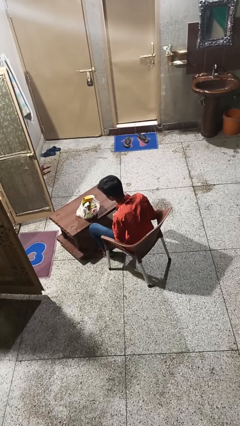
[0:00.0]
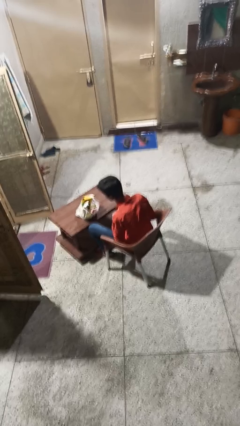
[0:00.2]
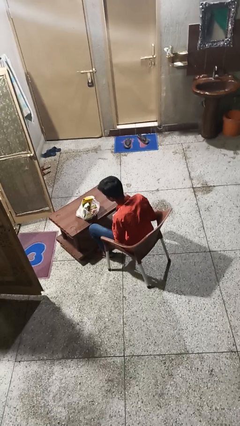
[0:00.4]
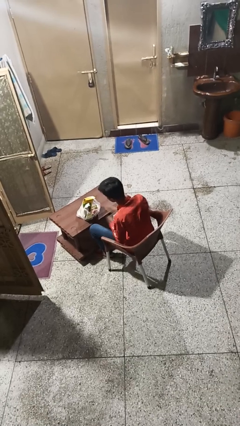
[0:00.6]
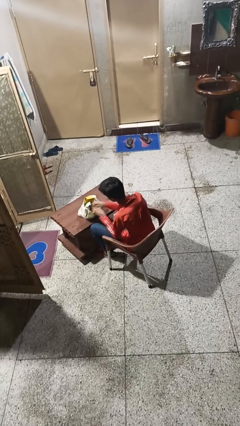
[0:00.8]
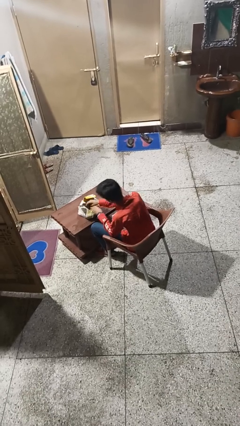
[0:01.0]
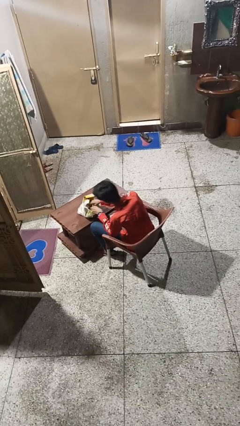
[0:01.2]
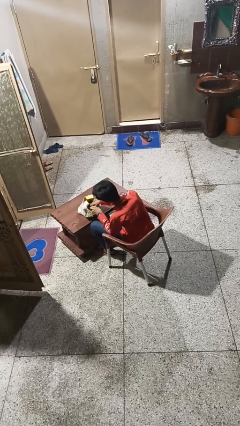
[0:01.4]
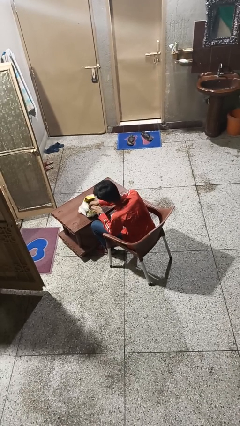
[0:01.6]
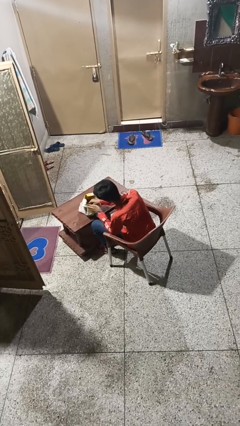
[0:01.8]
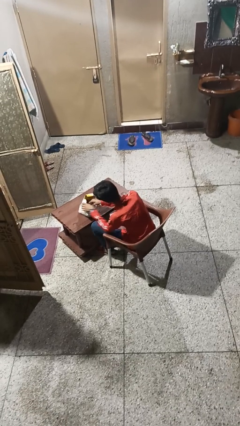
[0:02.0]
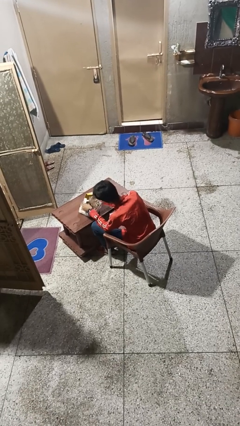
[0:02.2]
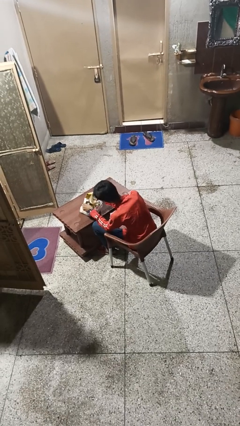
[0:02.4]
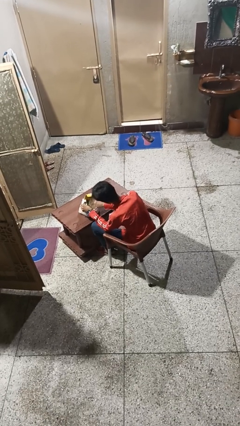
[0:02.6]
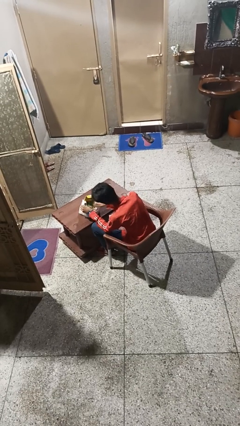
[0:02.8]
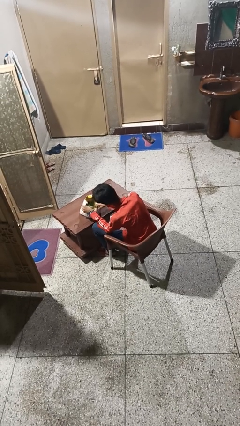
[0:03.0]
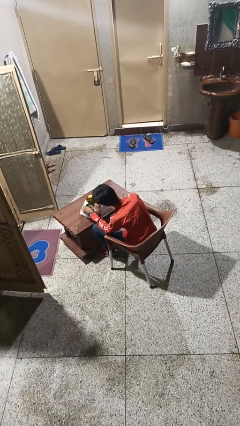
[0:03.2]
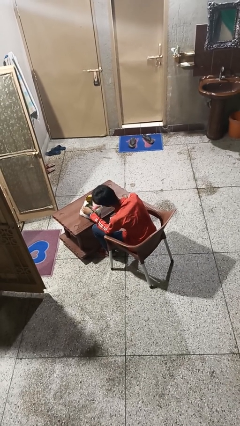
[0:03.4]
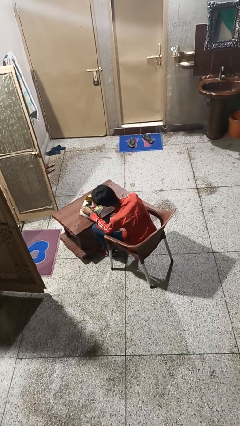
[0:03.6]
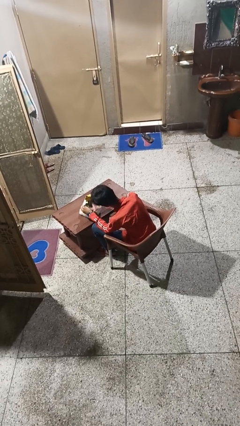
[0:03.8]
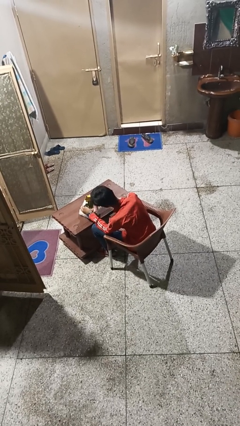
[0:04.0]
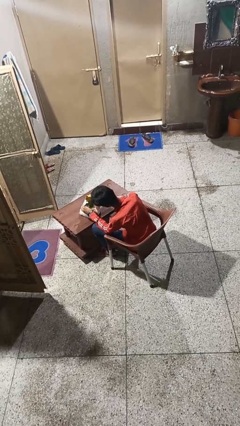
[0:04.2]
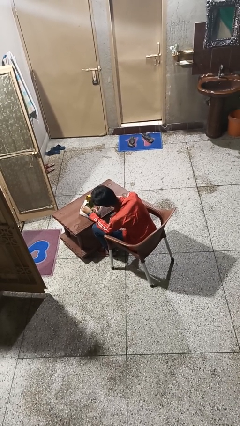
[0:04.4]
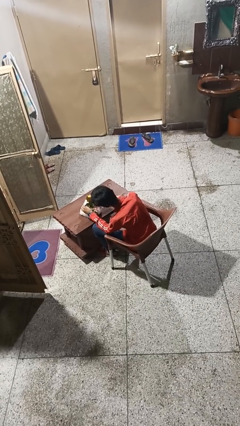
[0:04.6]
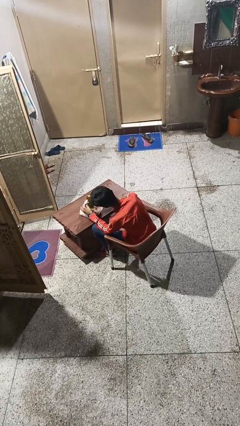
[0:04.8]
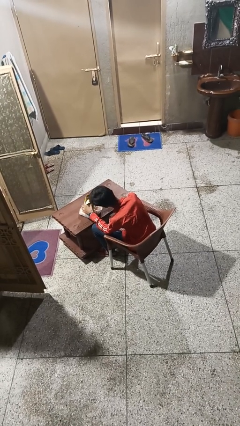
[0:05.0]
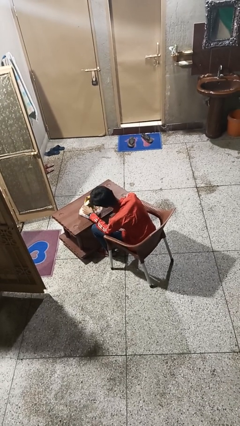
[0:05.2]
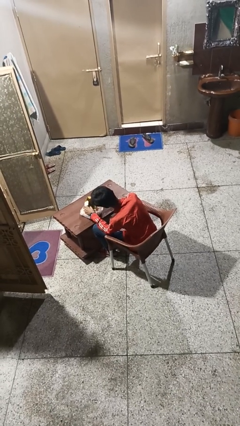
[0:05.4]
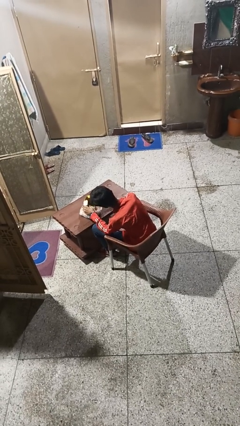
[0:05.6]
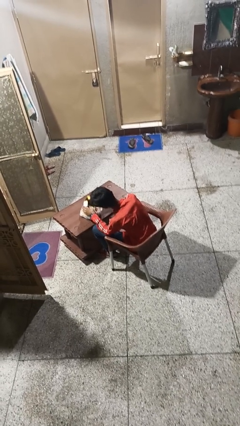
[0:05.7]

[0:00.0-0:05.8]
person searches in bag

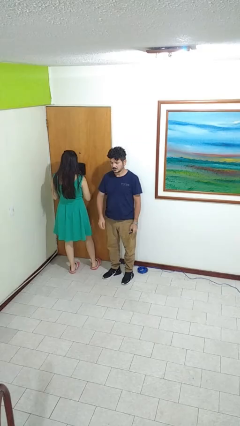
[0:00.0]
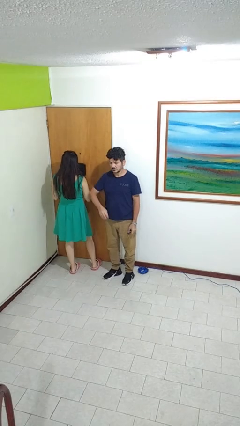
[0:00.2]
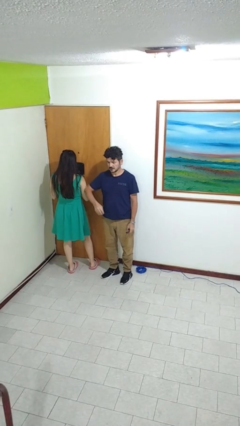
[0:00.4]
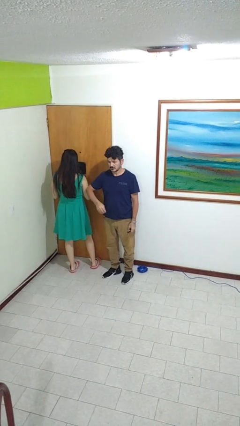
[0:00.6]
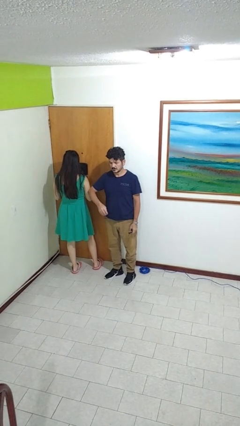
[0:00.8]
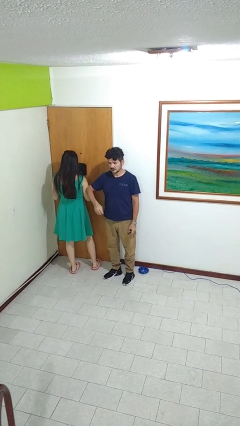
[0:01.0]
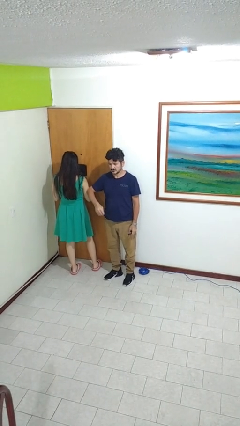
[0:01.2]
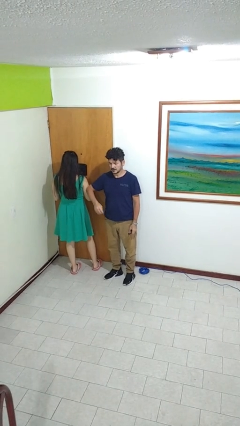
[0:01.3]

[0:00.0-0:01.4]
person nudges person with elbow

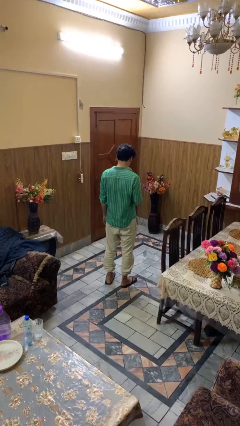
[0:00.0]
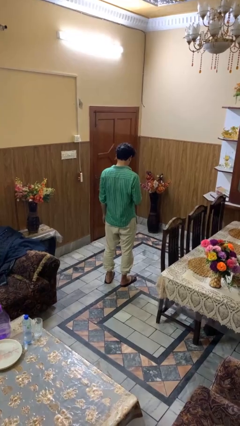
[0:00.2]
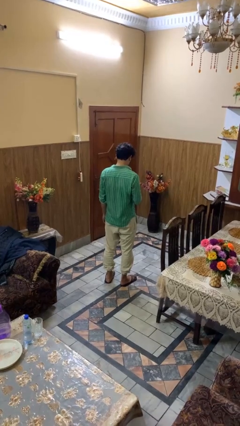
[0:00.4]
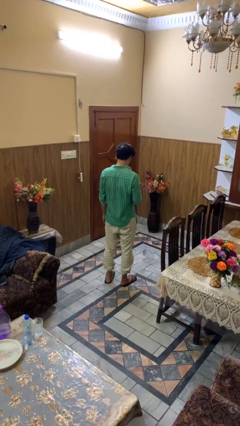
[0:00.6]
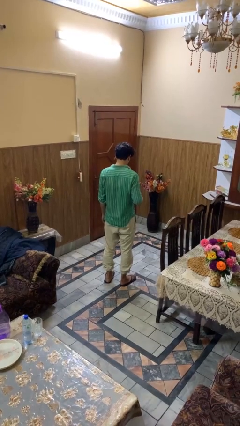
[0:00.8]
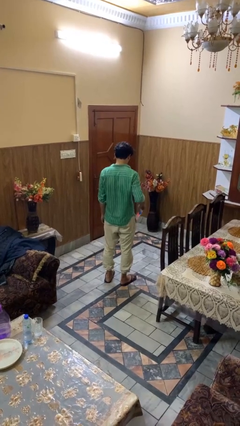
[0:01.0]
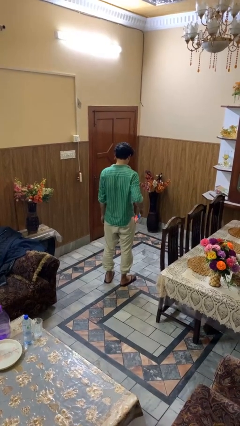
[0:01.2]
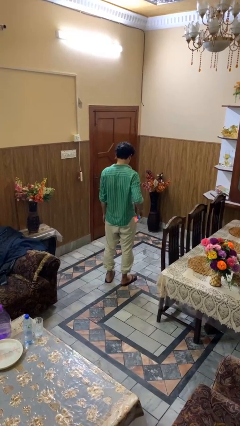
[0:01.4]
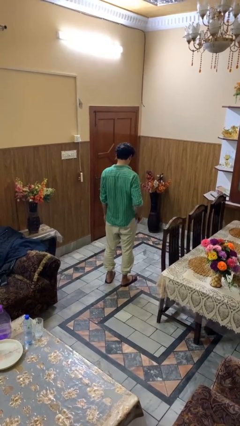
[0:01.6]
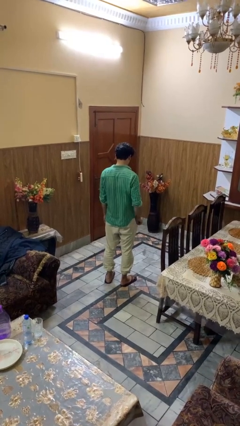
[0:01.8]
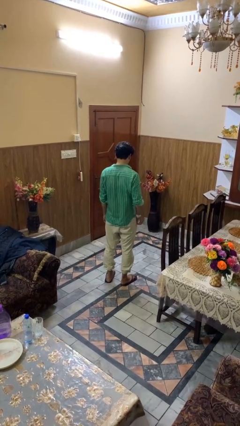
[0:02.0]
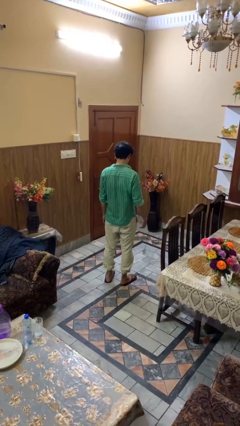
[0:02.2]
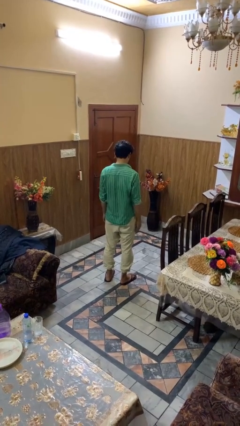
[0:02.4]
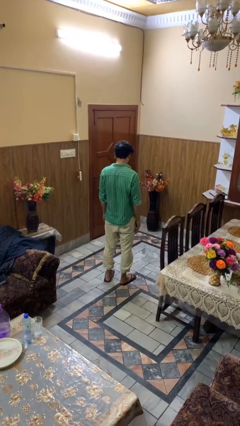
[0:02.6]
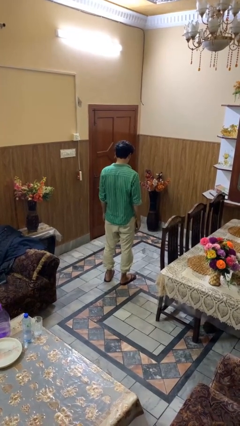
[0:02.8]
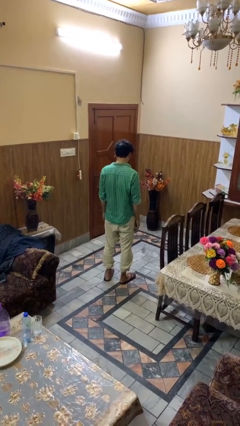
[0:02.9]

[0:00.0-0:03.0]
person puts phone into pocket

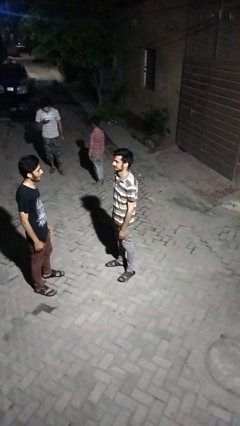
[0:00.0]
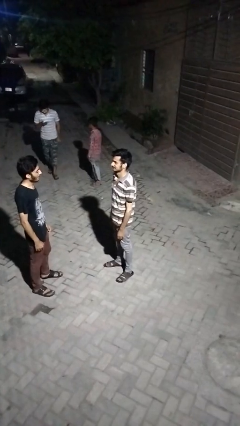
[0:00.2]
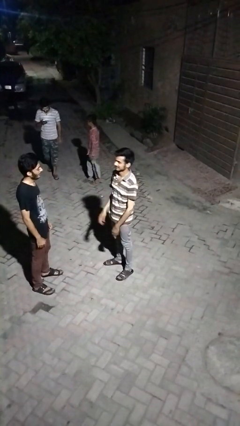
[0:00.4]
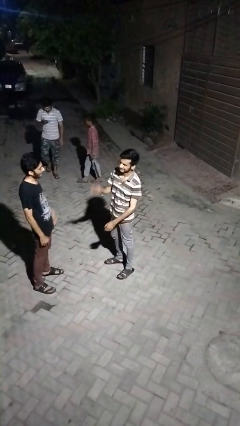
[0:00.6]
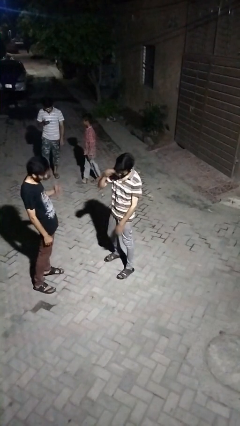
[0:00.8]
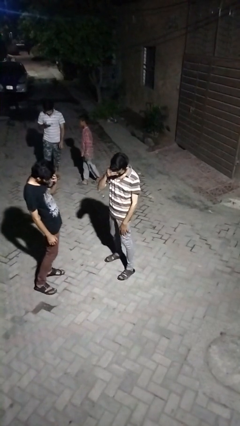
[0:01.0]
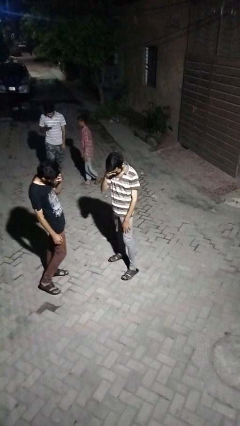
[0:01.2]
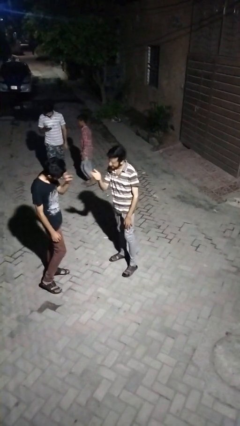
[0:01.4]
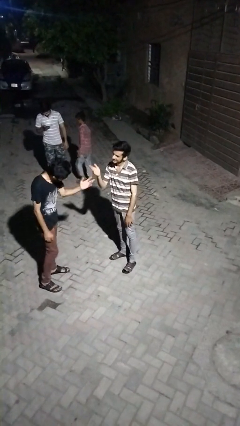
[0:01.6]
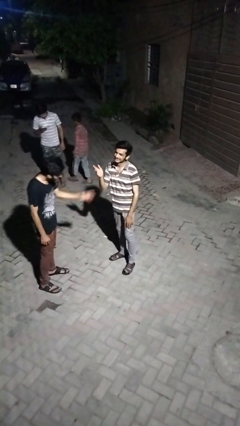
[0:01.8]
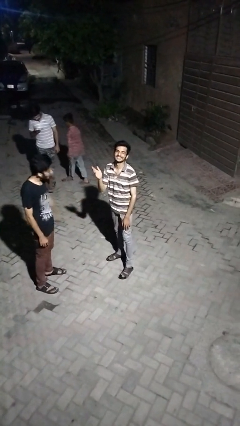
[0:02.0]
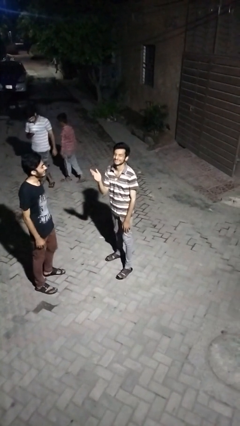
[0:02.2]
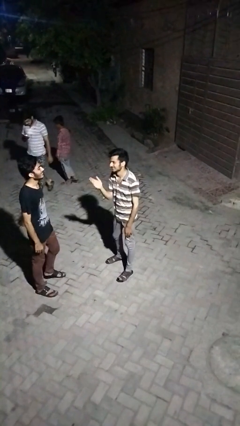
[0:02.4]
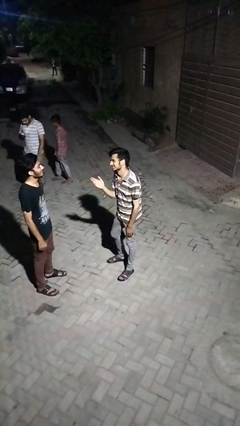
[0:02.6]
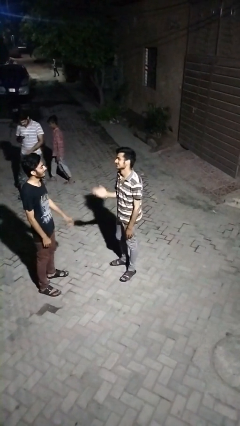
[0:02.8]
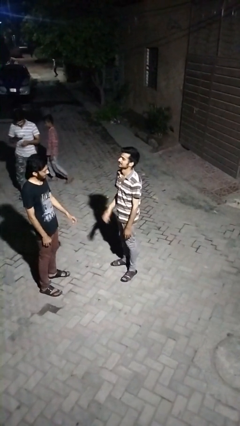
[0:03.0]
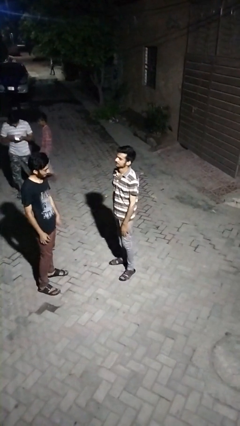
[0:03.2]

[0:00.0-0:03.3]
person laughs with person

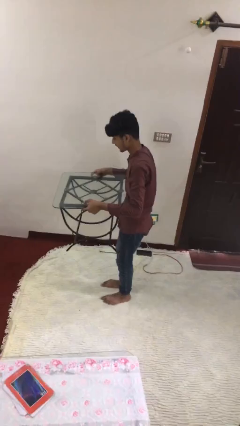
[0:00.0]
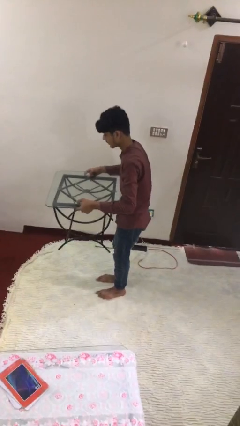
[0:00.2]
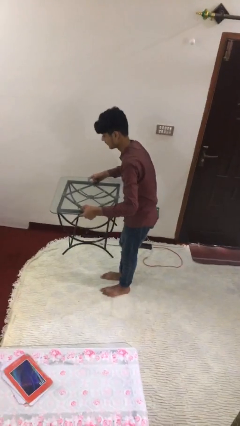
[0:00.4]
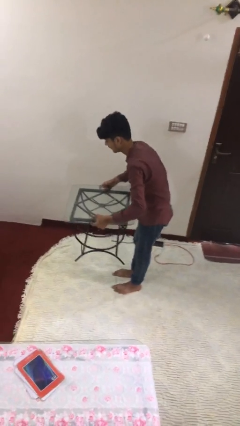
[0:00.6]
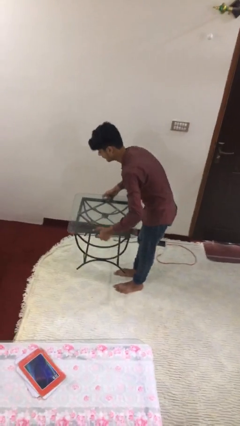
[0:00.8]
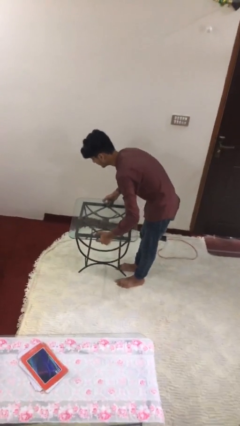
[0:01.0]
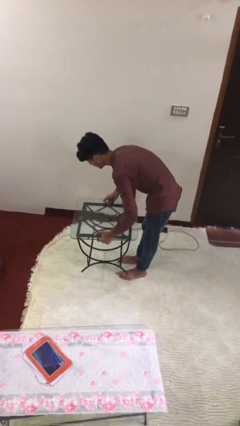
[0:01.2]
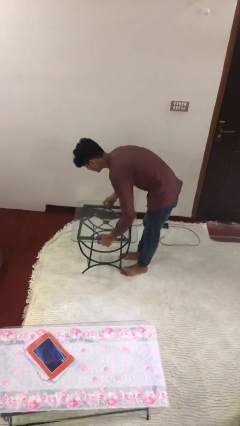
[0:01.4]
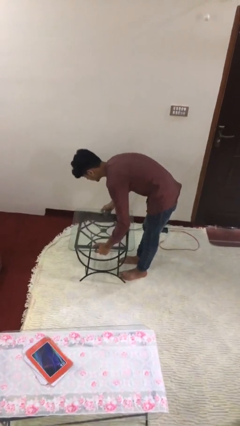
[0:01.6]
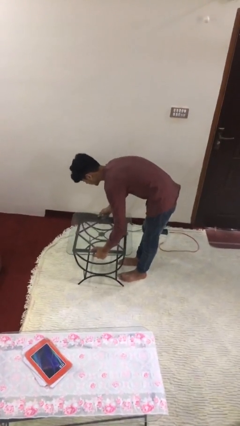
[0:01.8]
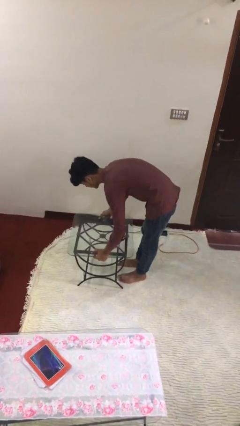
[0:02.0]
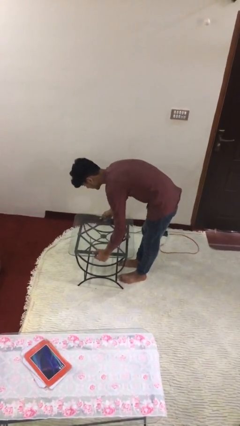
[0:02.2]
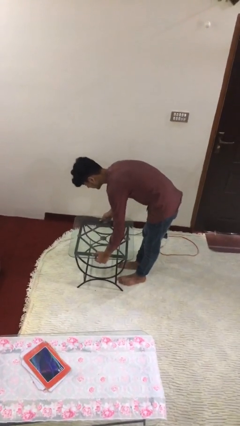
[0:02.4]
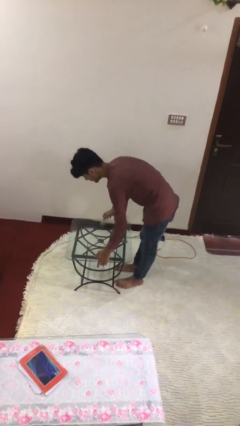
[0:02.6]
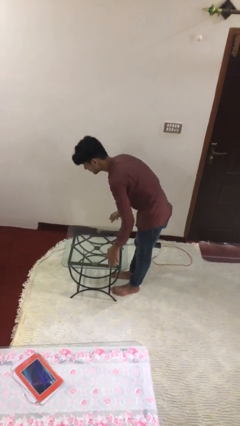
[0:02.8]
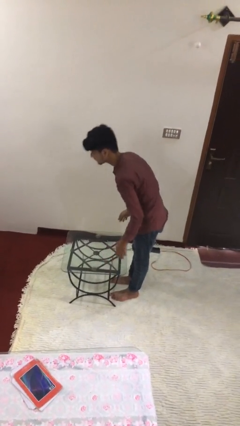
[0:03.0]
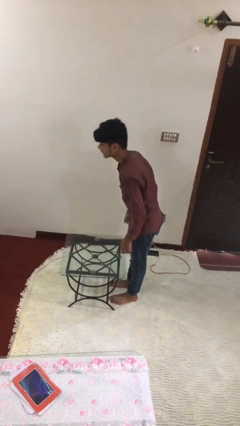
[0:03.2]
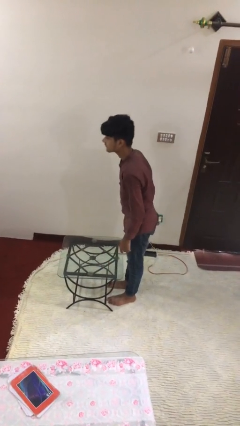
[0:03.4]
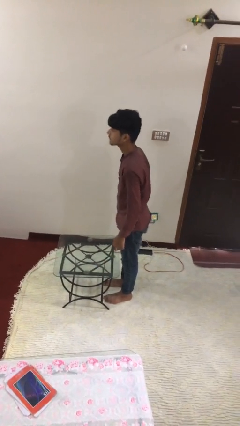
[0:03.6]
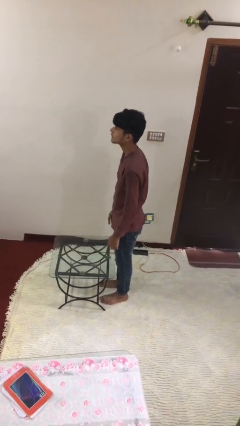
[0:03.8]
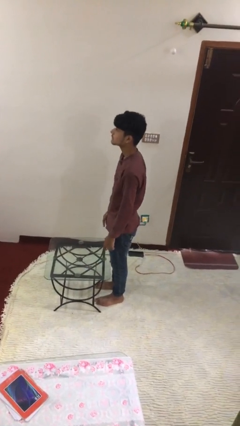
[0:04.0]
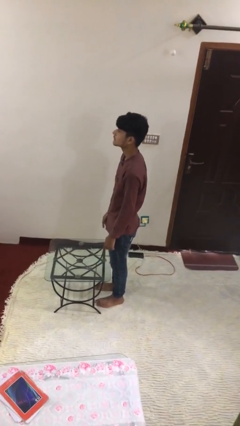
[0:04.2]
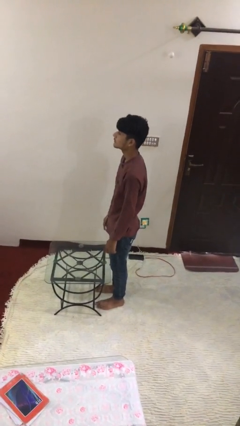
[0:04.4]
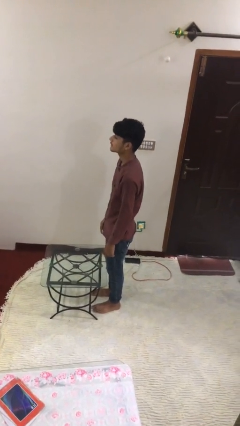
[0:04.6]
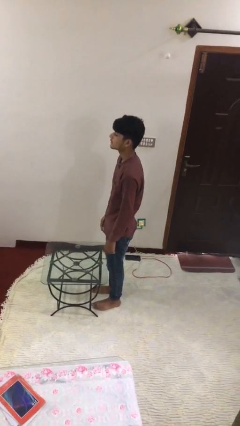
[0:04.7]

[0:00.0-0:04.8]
person puts down object on floor
